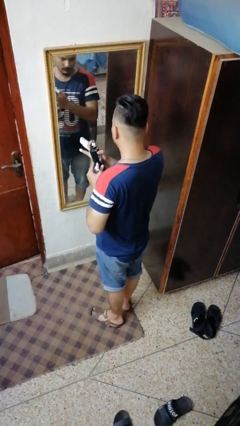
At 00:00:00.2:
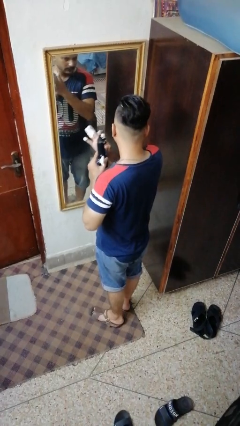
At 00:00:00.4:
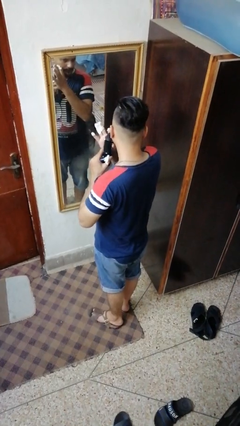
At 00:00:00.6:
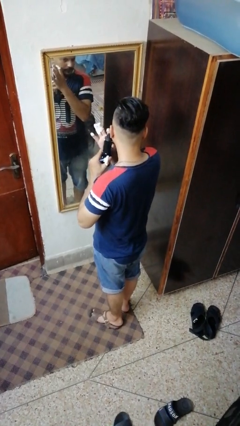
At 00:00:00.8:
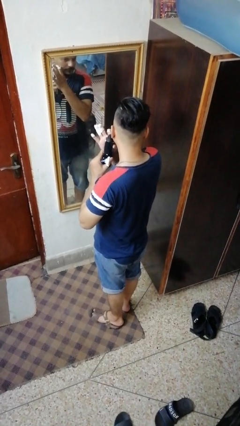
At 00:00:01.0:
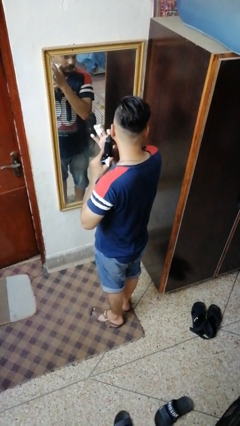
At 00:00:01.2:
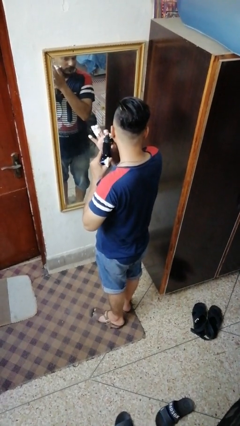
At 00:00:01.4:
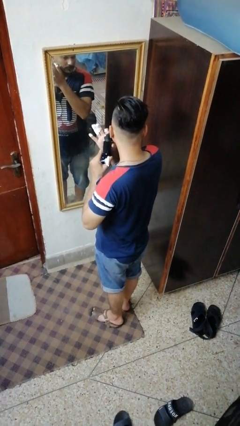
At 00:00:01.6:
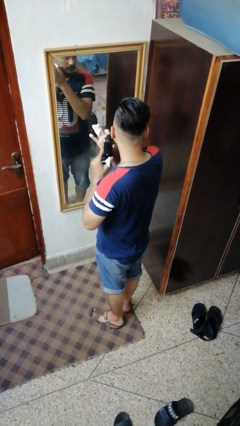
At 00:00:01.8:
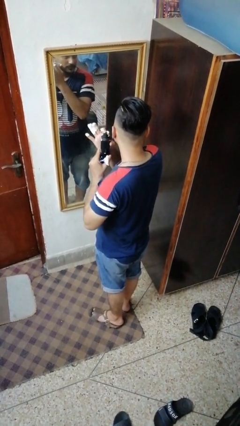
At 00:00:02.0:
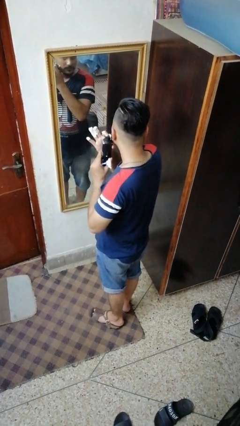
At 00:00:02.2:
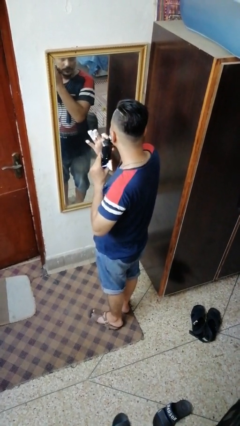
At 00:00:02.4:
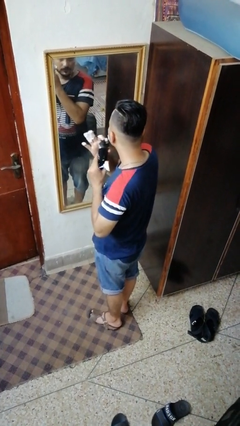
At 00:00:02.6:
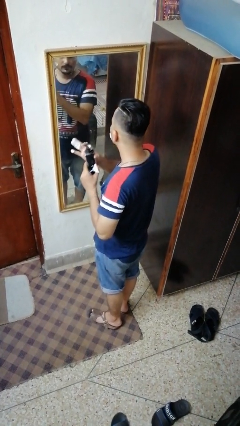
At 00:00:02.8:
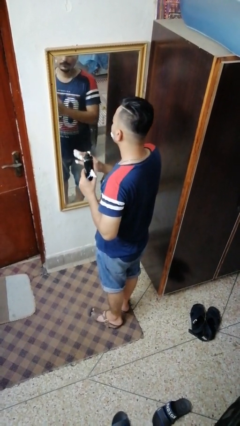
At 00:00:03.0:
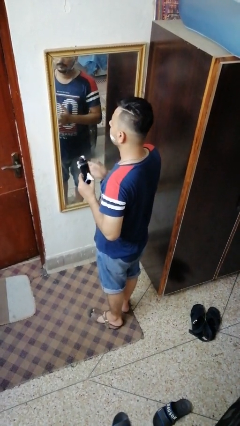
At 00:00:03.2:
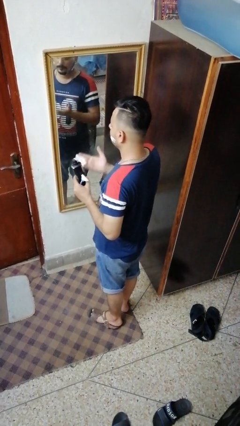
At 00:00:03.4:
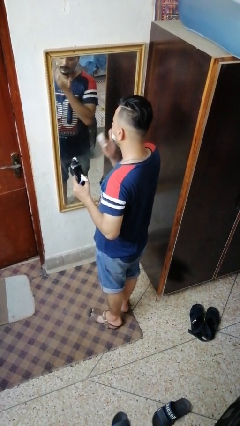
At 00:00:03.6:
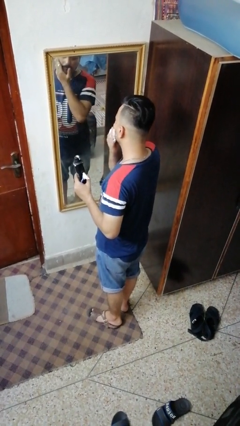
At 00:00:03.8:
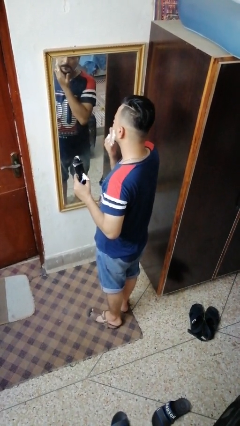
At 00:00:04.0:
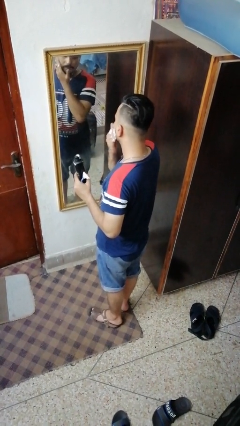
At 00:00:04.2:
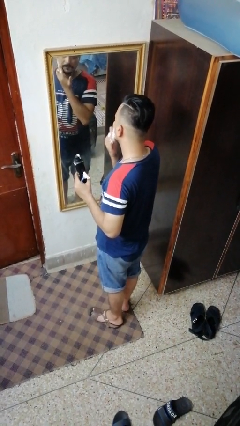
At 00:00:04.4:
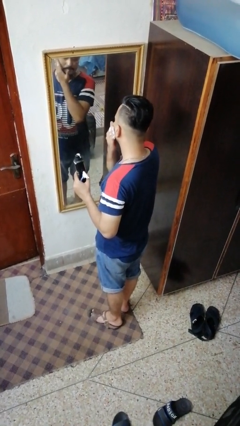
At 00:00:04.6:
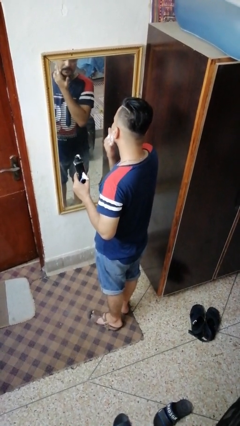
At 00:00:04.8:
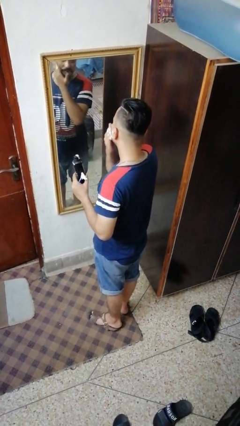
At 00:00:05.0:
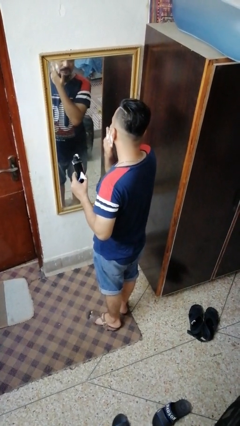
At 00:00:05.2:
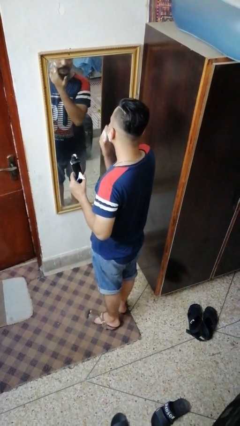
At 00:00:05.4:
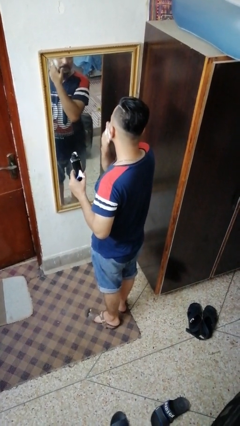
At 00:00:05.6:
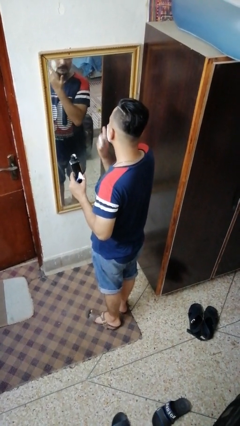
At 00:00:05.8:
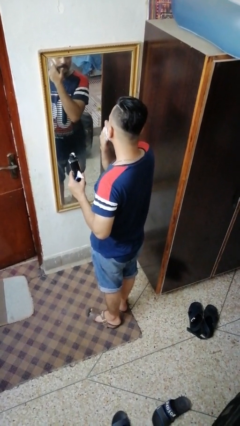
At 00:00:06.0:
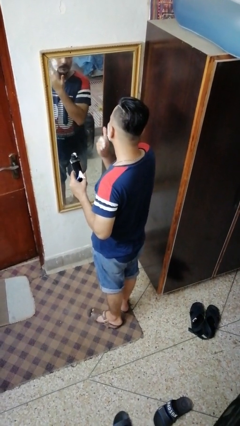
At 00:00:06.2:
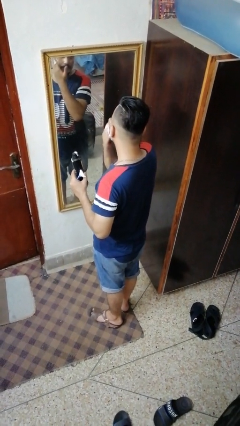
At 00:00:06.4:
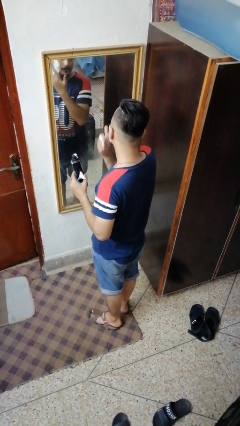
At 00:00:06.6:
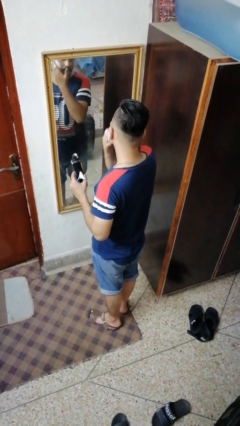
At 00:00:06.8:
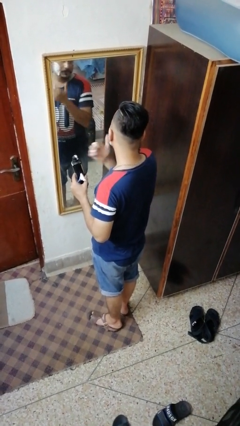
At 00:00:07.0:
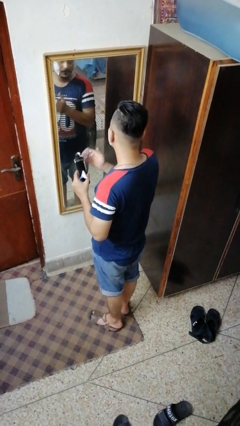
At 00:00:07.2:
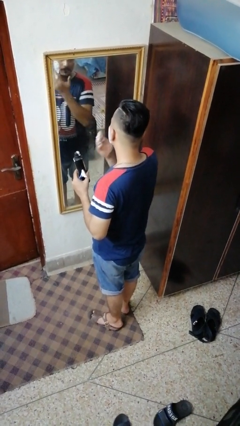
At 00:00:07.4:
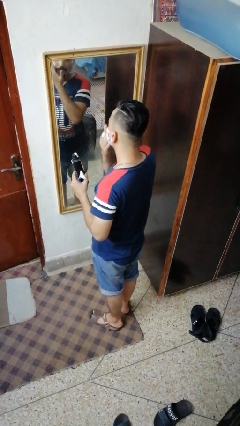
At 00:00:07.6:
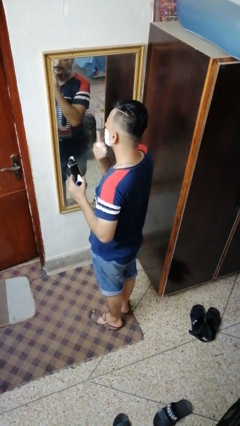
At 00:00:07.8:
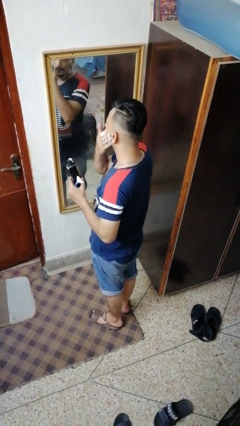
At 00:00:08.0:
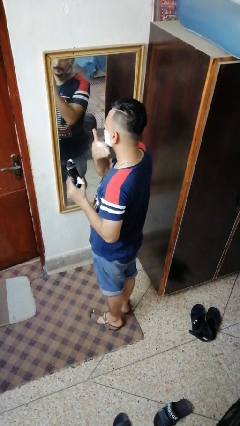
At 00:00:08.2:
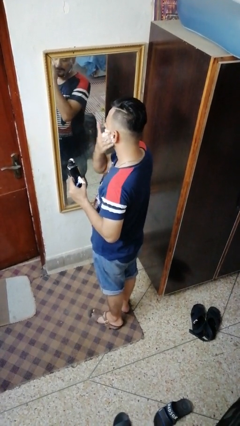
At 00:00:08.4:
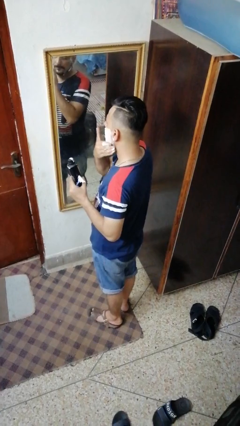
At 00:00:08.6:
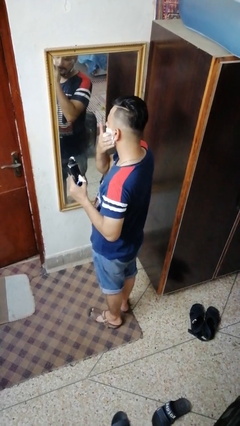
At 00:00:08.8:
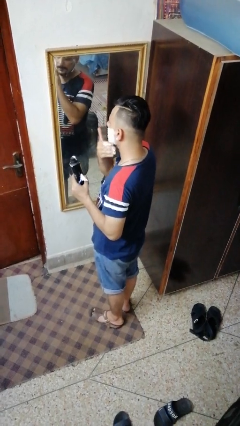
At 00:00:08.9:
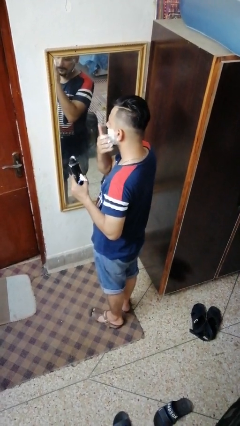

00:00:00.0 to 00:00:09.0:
person applies shaving cream

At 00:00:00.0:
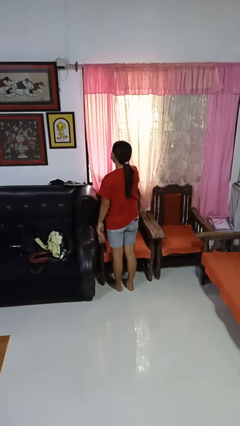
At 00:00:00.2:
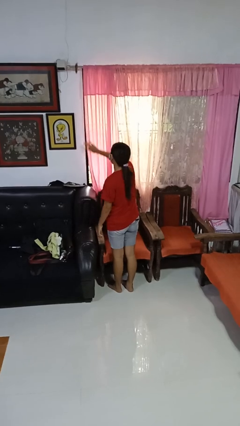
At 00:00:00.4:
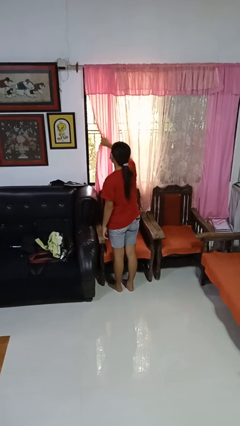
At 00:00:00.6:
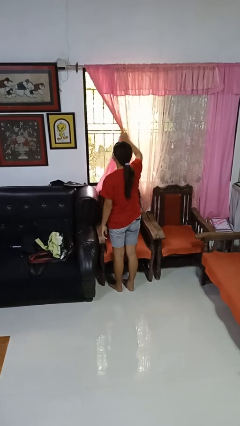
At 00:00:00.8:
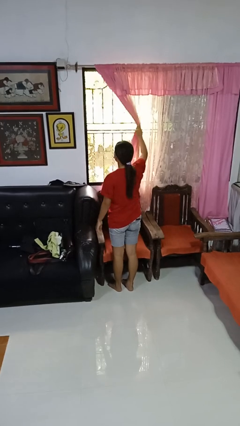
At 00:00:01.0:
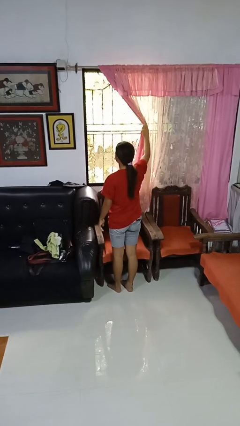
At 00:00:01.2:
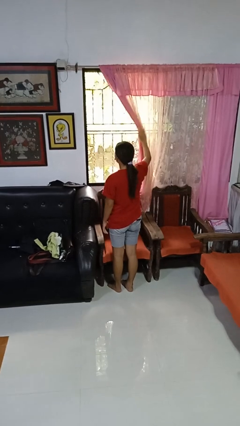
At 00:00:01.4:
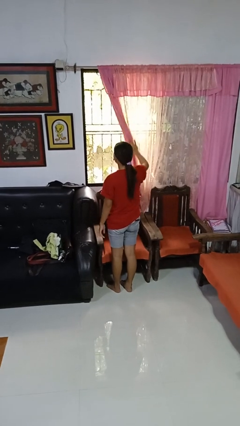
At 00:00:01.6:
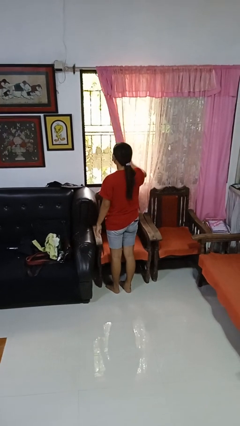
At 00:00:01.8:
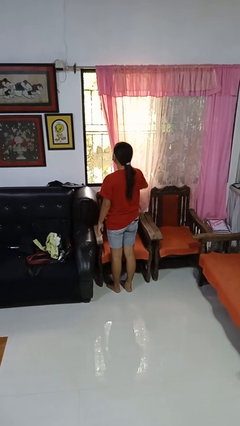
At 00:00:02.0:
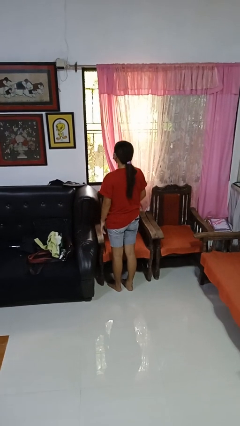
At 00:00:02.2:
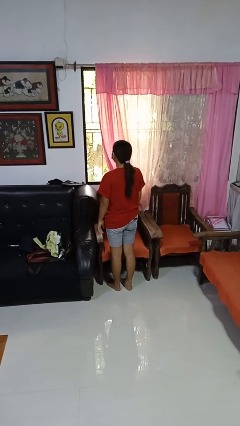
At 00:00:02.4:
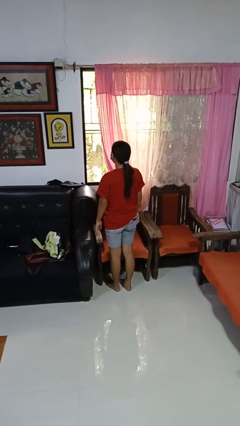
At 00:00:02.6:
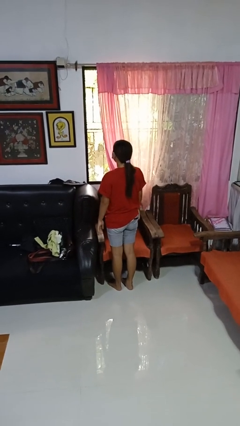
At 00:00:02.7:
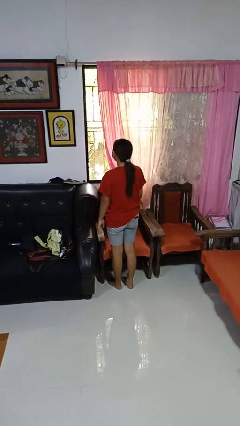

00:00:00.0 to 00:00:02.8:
person opens curtains

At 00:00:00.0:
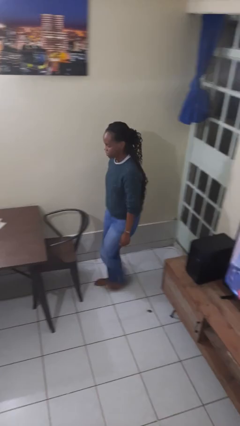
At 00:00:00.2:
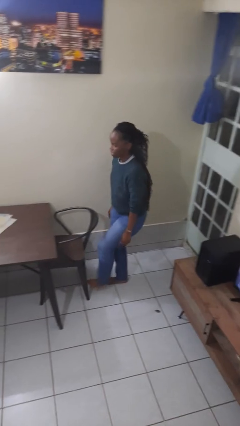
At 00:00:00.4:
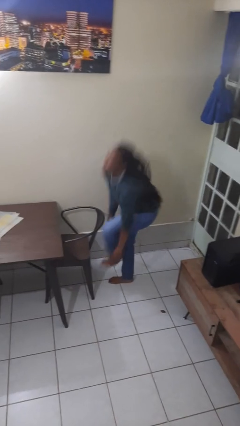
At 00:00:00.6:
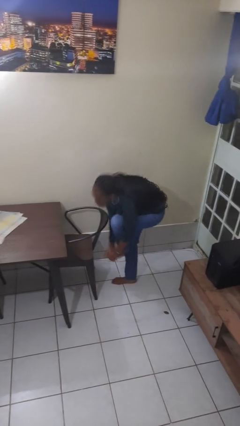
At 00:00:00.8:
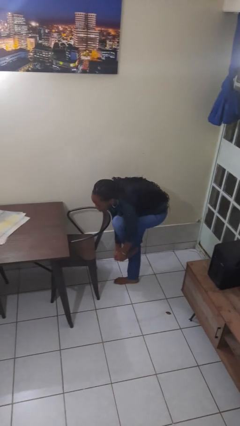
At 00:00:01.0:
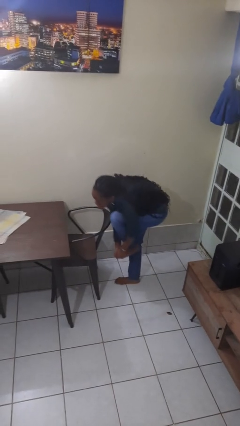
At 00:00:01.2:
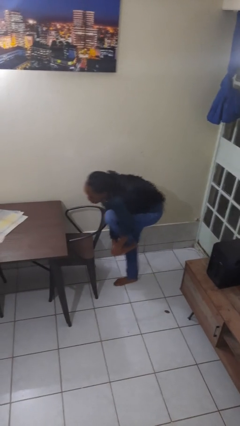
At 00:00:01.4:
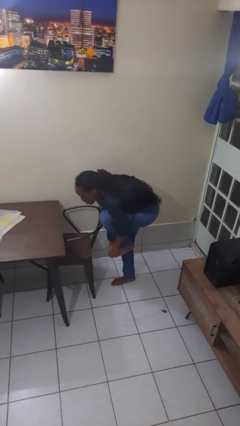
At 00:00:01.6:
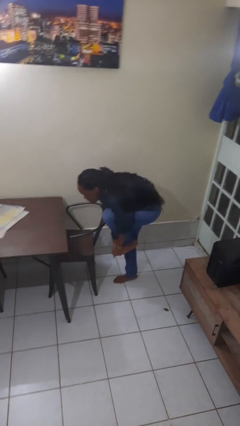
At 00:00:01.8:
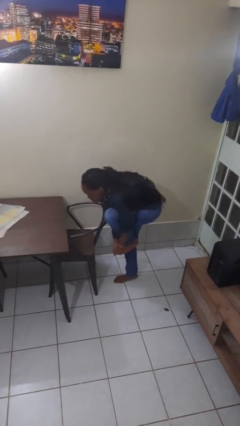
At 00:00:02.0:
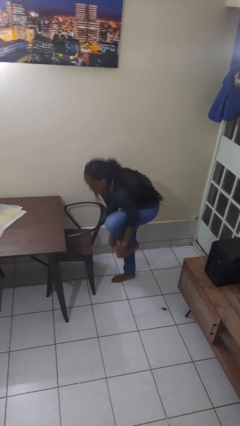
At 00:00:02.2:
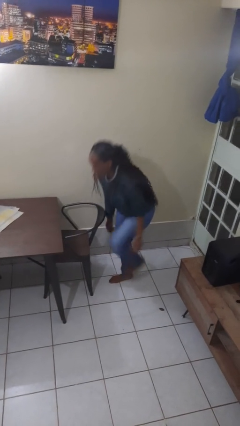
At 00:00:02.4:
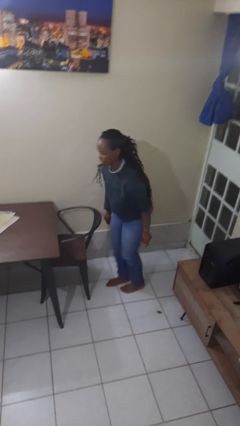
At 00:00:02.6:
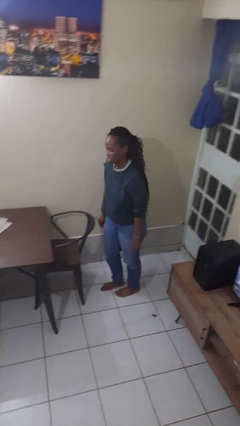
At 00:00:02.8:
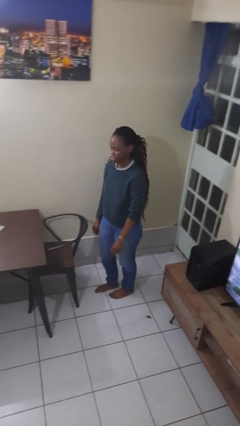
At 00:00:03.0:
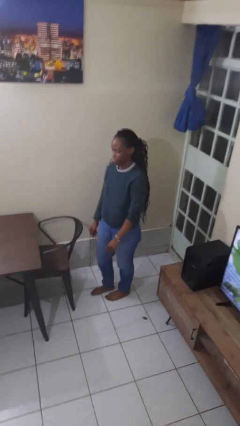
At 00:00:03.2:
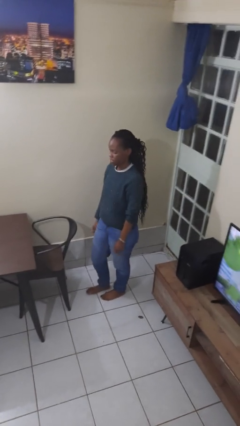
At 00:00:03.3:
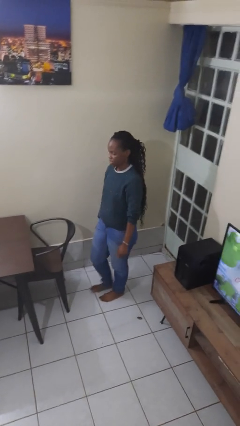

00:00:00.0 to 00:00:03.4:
person stubs toe

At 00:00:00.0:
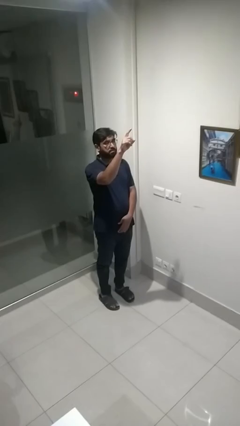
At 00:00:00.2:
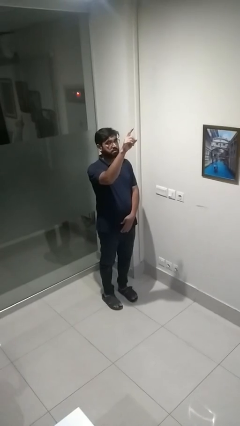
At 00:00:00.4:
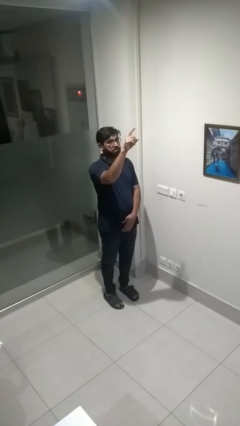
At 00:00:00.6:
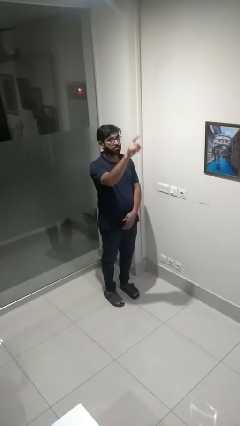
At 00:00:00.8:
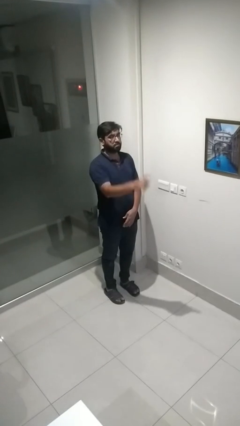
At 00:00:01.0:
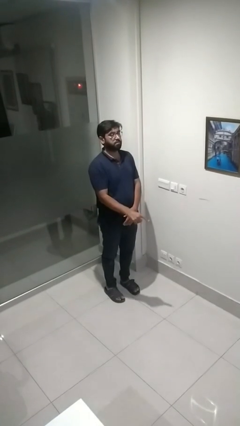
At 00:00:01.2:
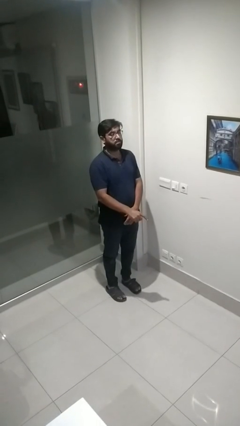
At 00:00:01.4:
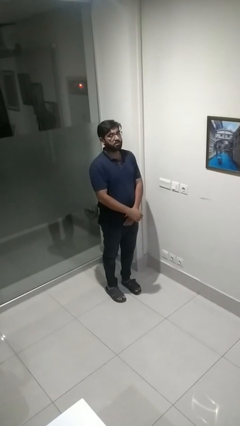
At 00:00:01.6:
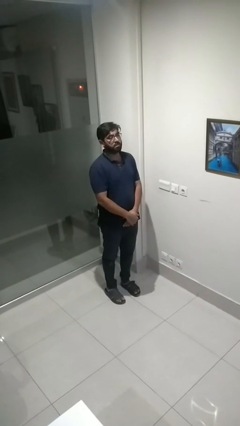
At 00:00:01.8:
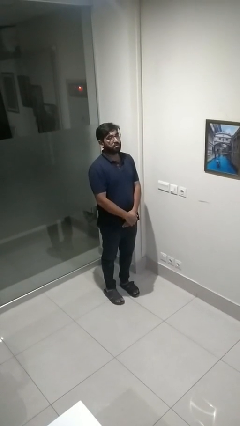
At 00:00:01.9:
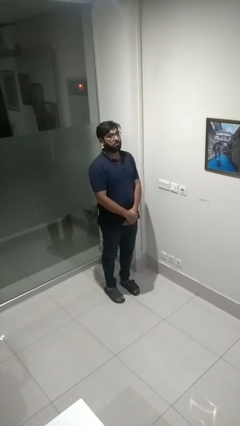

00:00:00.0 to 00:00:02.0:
person gestures lower hand

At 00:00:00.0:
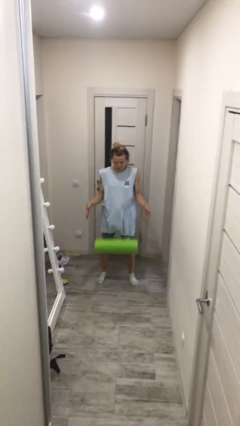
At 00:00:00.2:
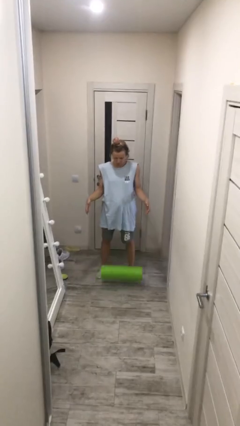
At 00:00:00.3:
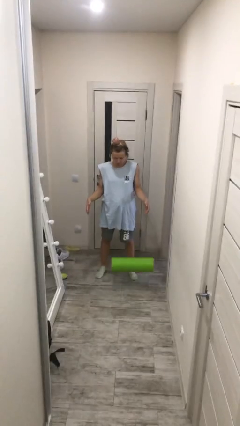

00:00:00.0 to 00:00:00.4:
person drops object
